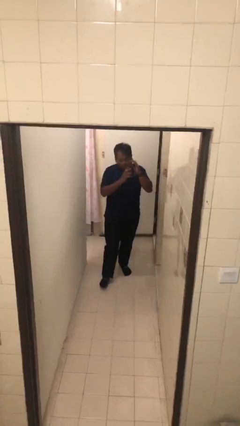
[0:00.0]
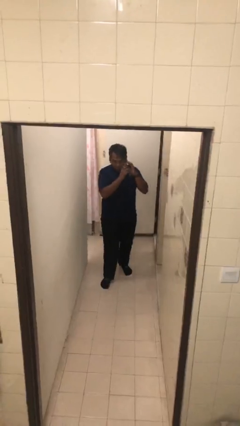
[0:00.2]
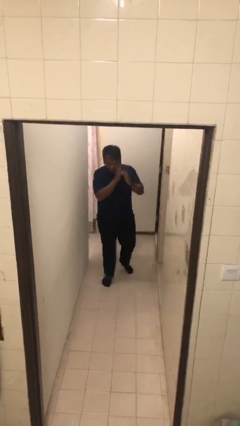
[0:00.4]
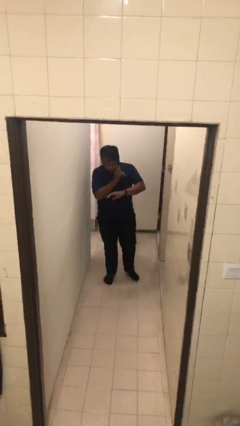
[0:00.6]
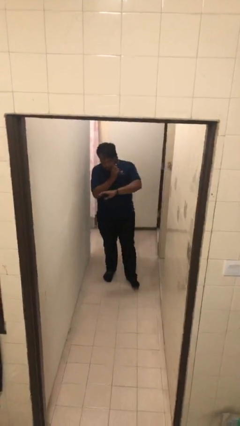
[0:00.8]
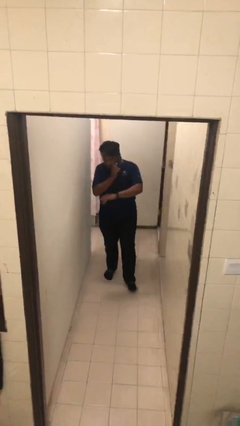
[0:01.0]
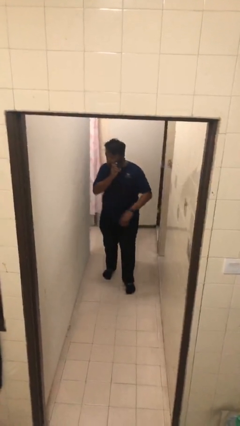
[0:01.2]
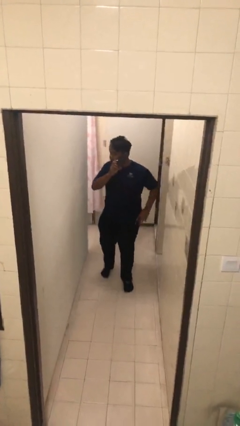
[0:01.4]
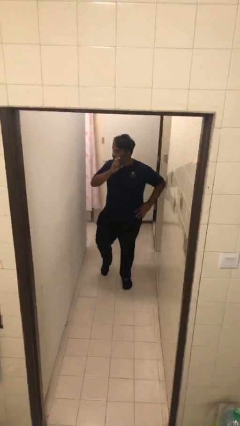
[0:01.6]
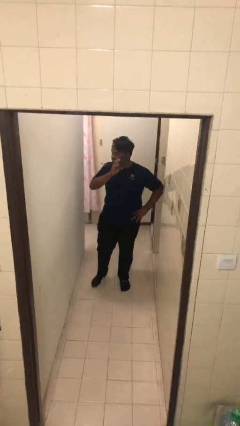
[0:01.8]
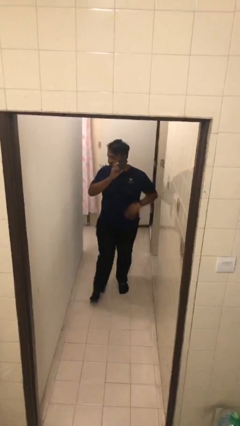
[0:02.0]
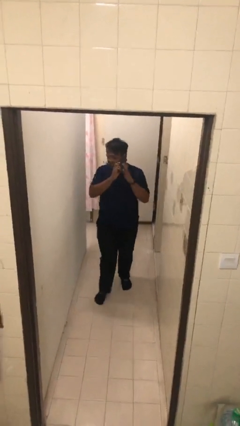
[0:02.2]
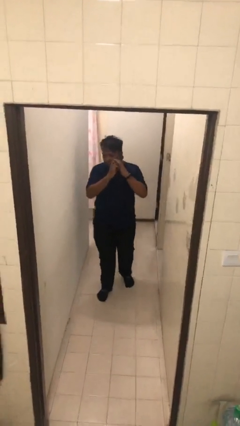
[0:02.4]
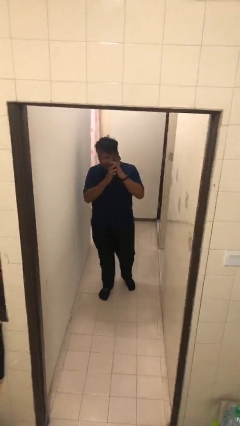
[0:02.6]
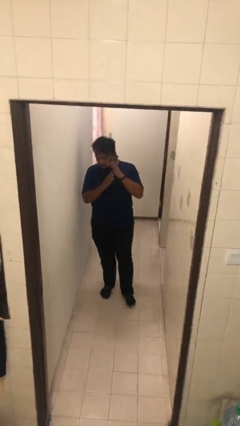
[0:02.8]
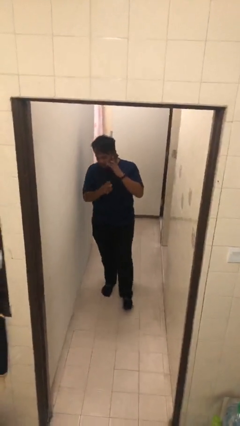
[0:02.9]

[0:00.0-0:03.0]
person talks on phone

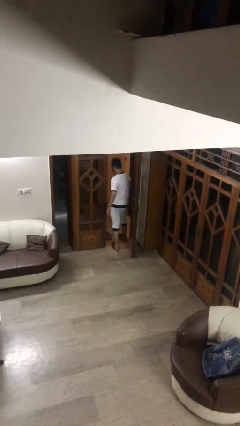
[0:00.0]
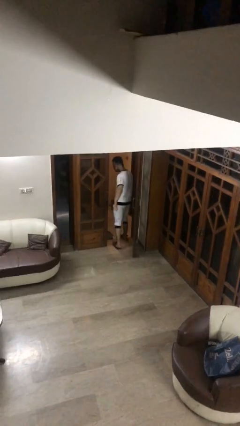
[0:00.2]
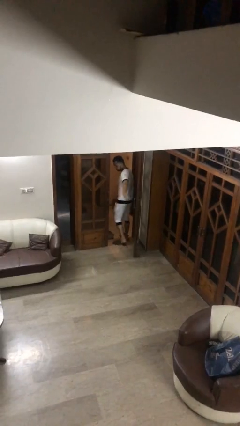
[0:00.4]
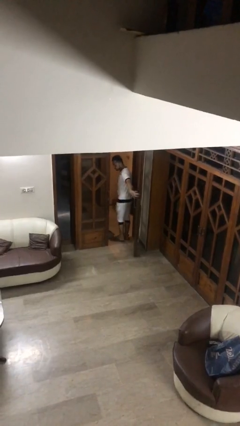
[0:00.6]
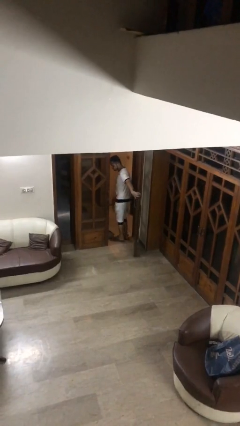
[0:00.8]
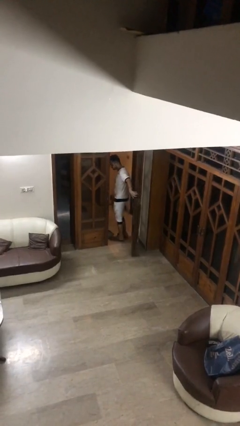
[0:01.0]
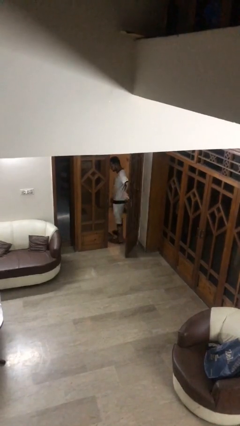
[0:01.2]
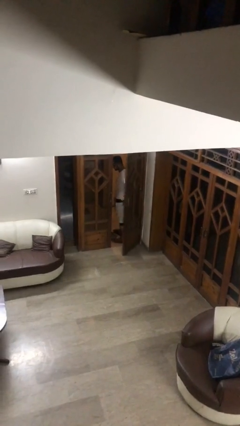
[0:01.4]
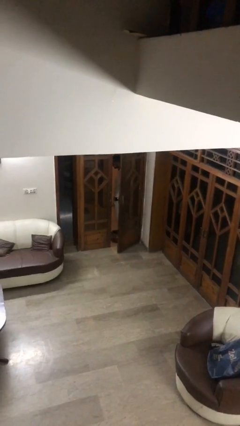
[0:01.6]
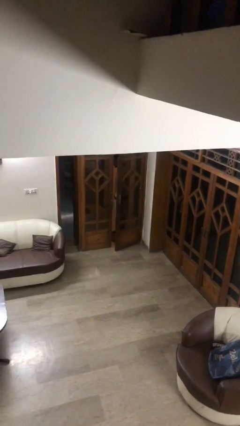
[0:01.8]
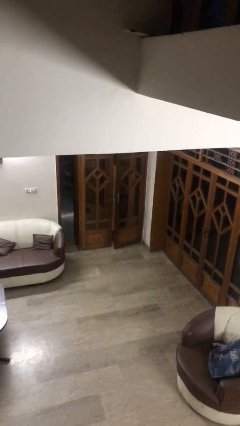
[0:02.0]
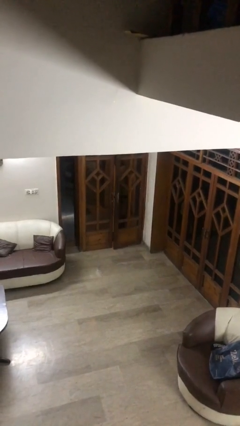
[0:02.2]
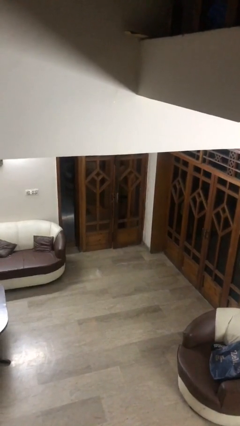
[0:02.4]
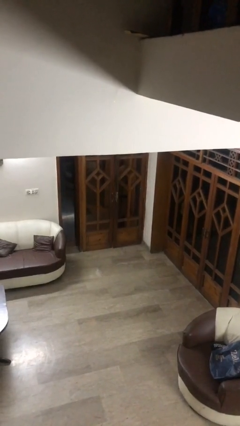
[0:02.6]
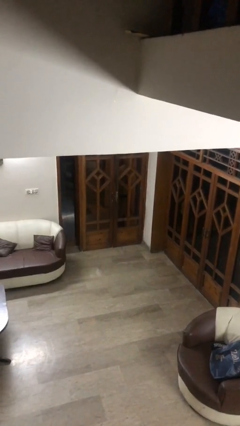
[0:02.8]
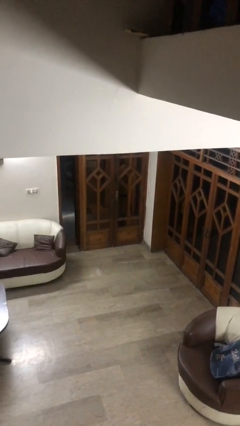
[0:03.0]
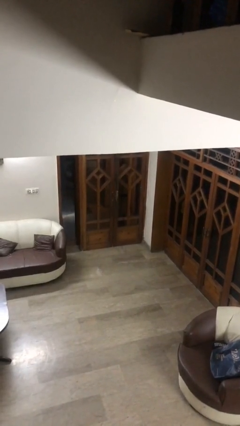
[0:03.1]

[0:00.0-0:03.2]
person closes facility door

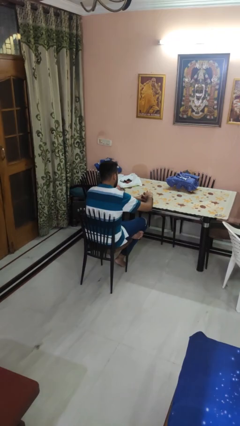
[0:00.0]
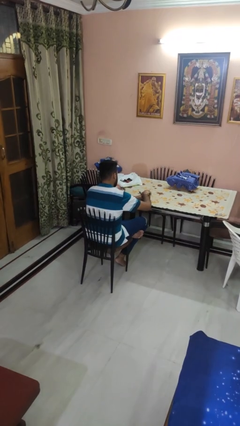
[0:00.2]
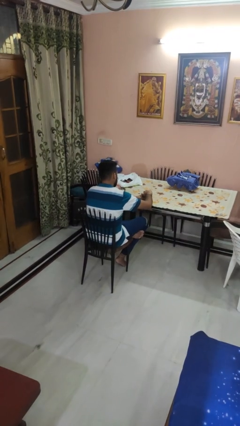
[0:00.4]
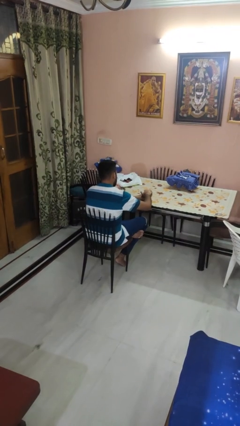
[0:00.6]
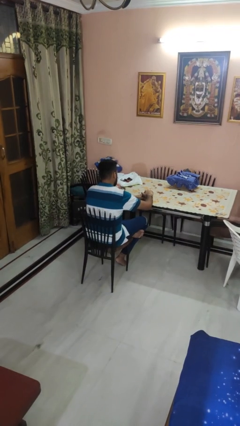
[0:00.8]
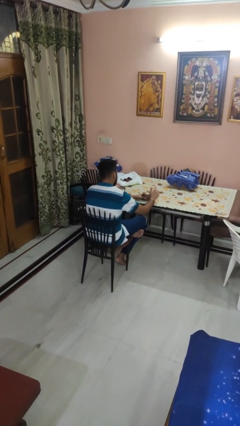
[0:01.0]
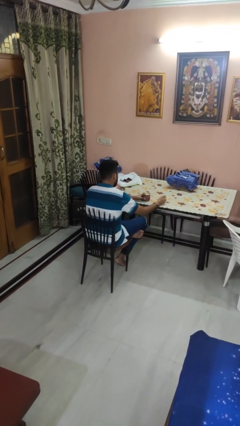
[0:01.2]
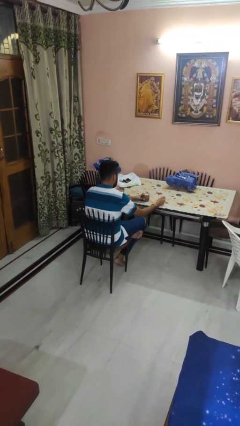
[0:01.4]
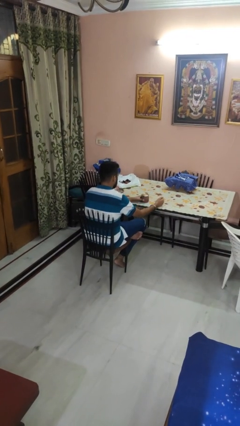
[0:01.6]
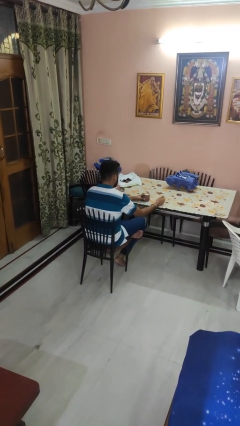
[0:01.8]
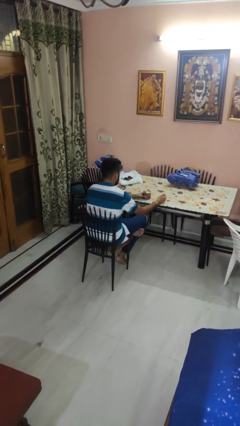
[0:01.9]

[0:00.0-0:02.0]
person closes jar

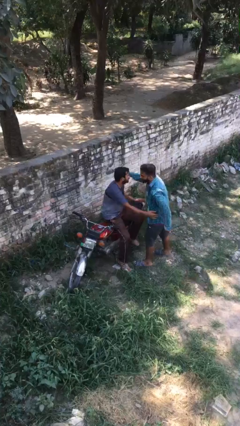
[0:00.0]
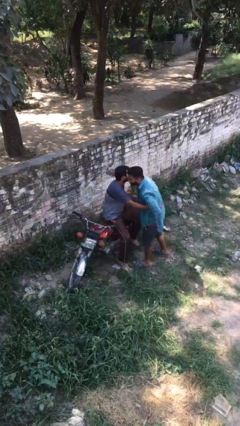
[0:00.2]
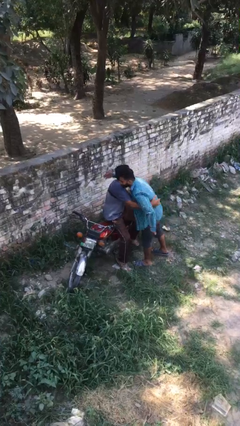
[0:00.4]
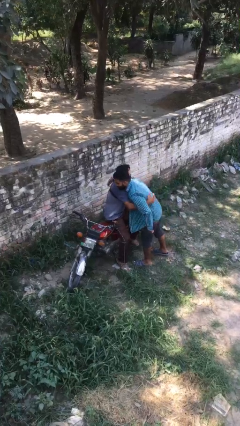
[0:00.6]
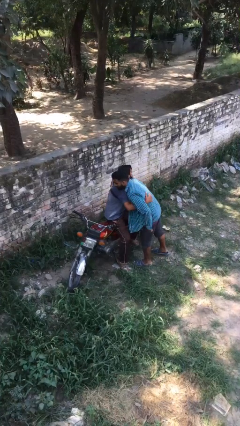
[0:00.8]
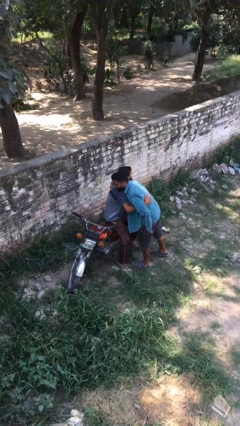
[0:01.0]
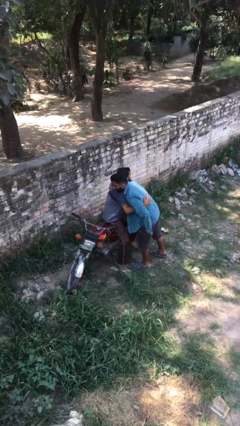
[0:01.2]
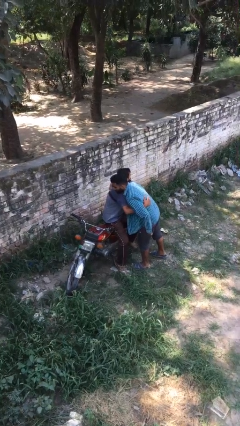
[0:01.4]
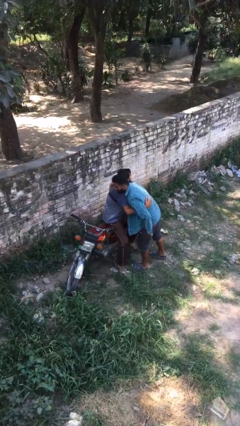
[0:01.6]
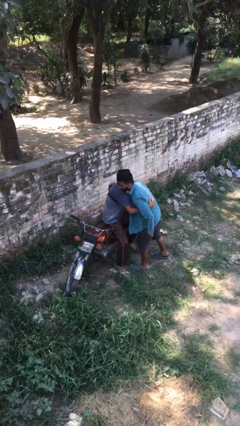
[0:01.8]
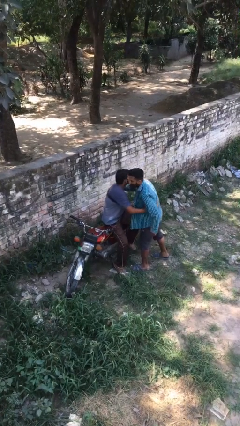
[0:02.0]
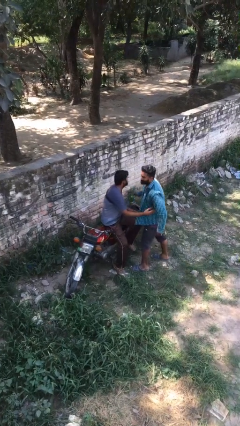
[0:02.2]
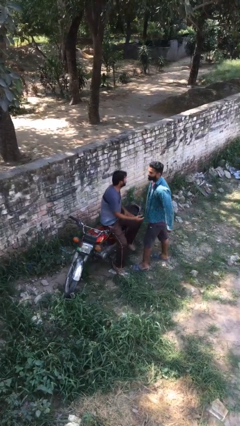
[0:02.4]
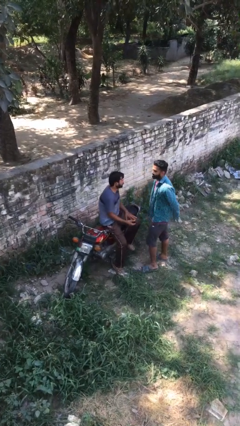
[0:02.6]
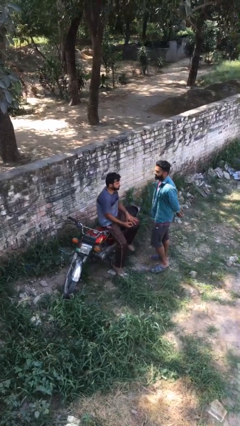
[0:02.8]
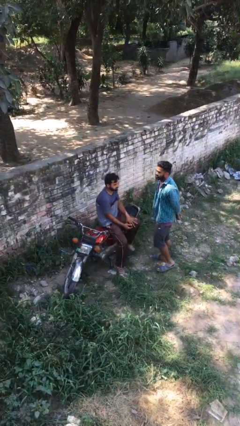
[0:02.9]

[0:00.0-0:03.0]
person embraces person

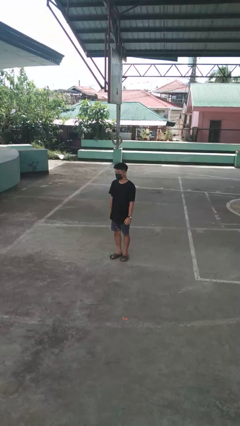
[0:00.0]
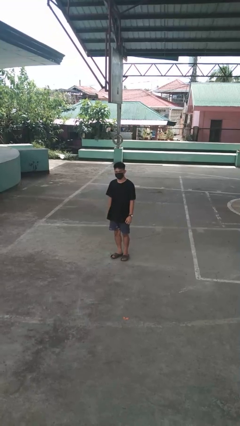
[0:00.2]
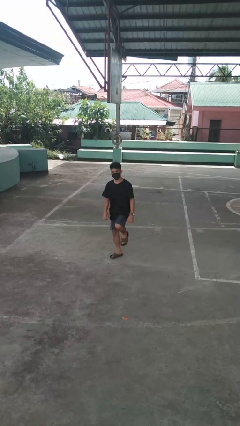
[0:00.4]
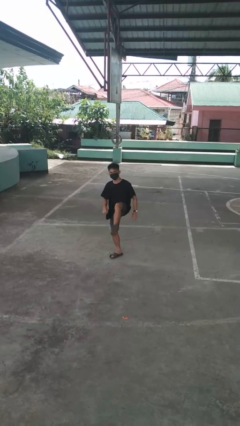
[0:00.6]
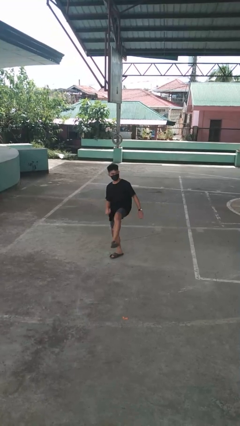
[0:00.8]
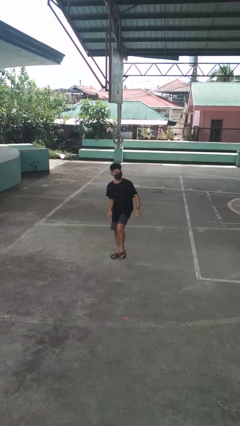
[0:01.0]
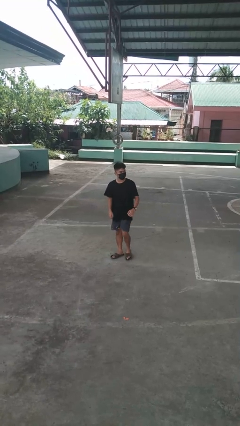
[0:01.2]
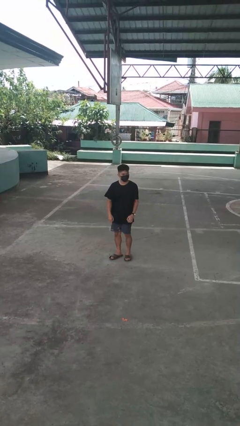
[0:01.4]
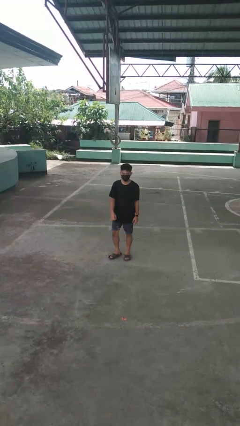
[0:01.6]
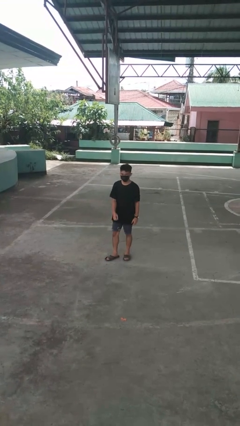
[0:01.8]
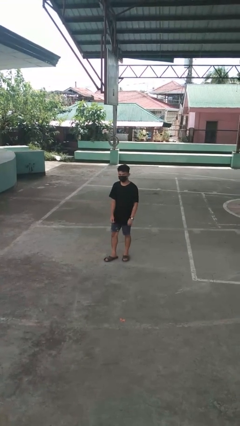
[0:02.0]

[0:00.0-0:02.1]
person karate kicks

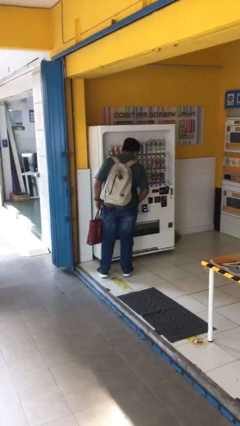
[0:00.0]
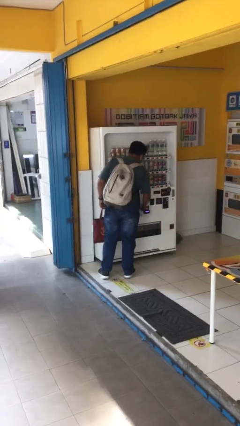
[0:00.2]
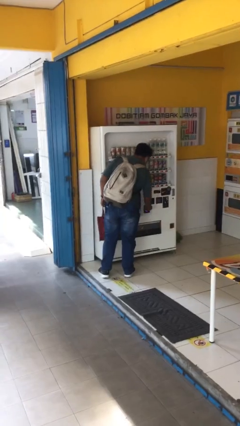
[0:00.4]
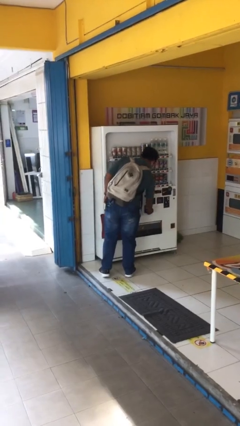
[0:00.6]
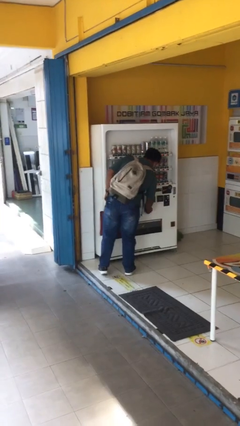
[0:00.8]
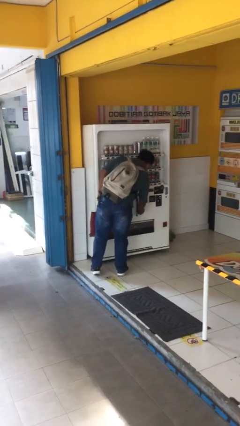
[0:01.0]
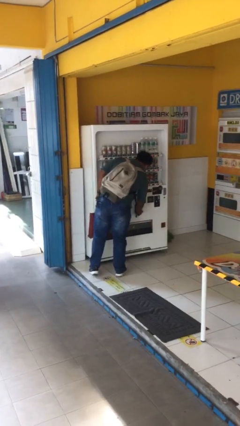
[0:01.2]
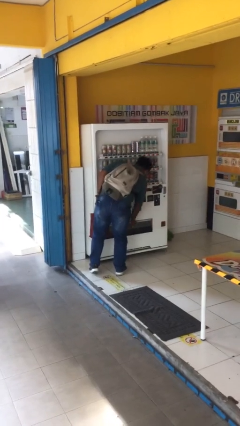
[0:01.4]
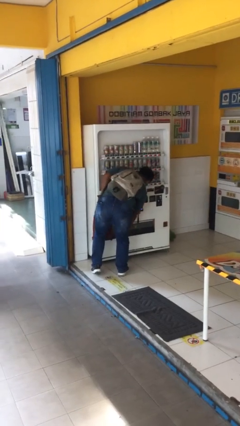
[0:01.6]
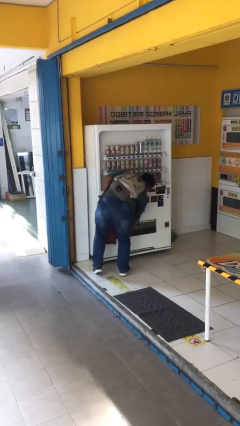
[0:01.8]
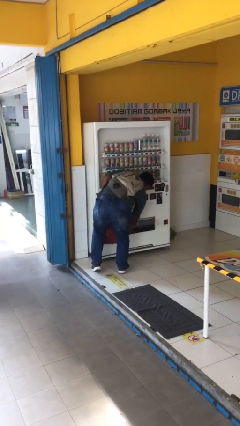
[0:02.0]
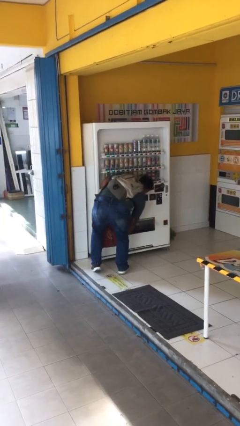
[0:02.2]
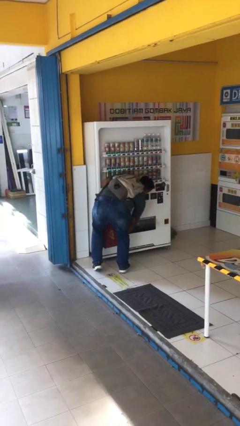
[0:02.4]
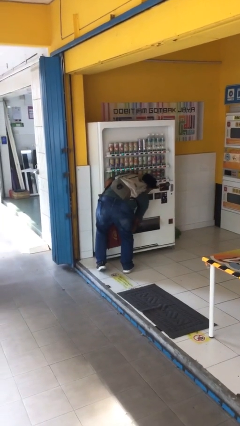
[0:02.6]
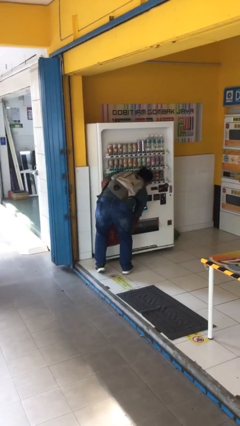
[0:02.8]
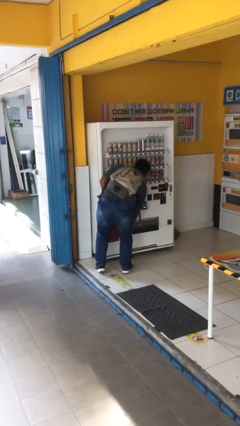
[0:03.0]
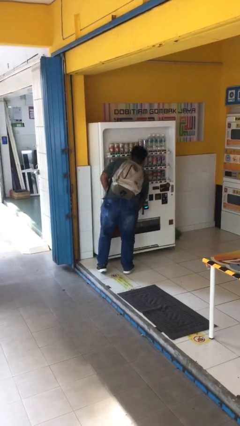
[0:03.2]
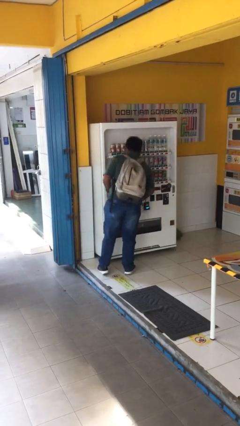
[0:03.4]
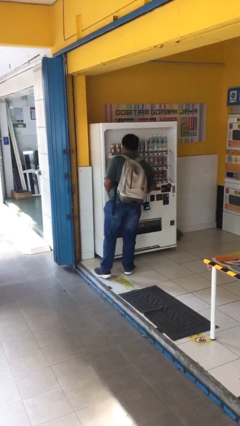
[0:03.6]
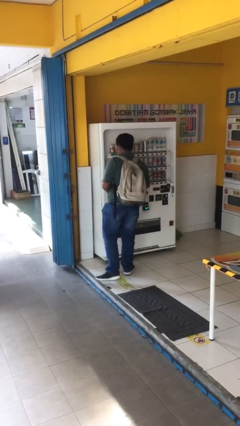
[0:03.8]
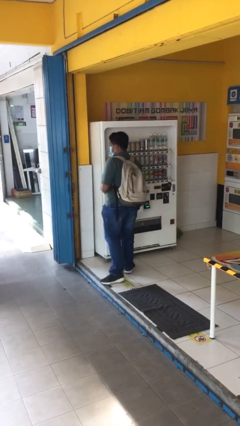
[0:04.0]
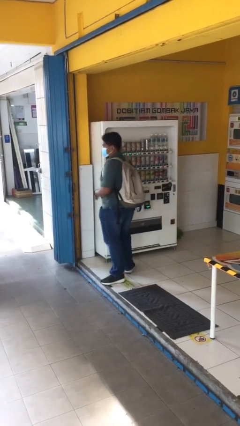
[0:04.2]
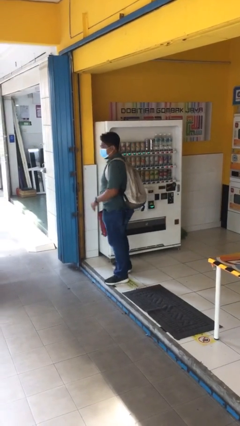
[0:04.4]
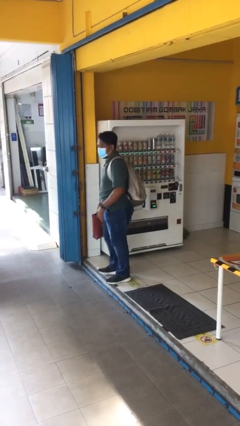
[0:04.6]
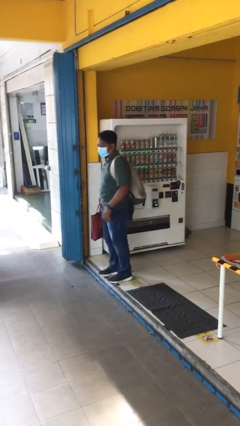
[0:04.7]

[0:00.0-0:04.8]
person purchases from machine
